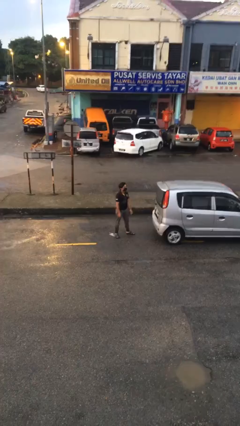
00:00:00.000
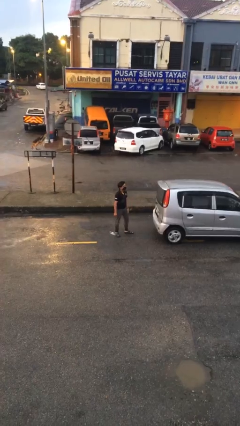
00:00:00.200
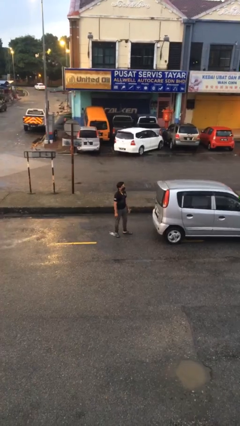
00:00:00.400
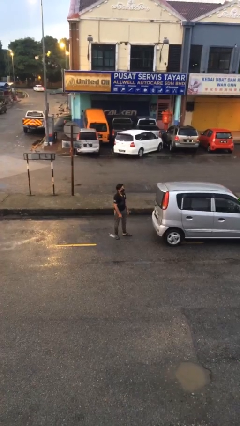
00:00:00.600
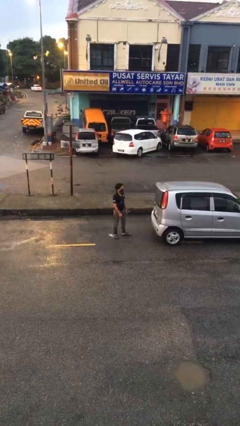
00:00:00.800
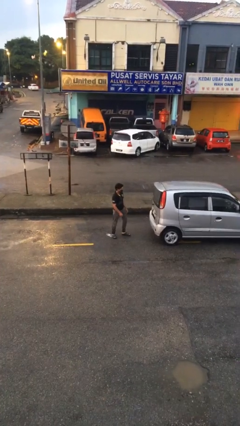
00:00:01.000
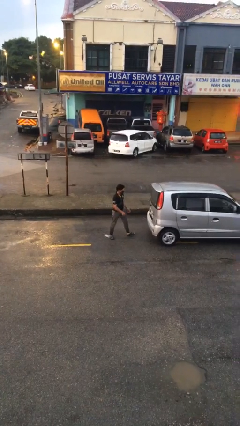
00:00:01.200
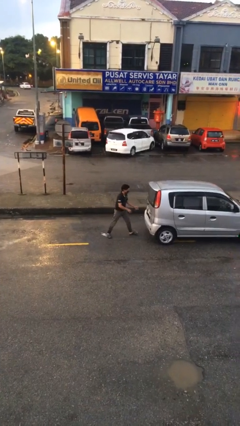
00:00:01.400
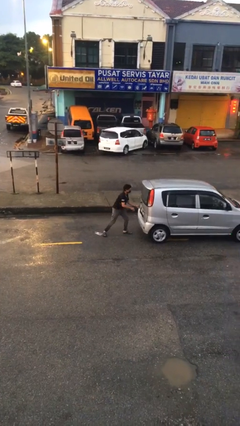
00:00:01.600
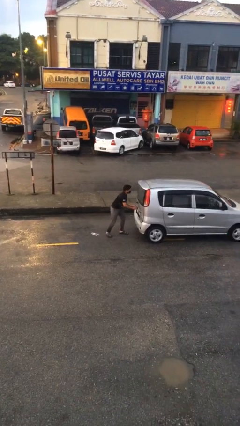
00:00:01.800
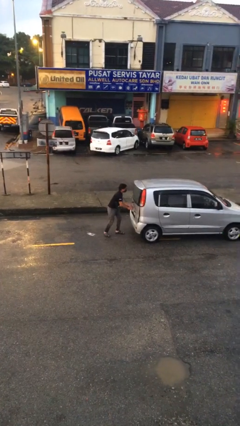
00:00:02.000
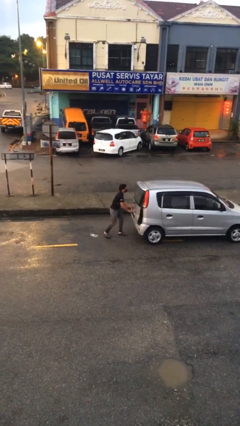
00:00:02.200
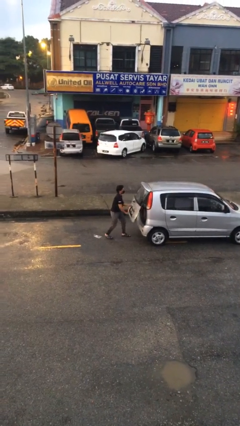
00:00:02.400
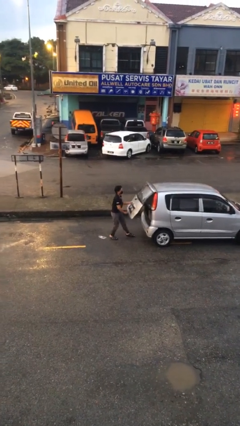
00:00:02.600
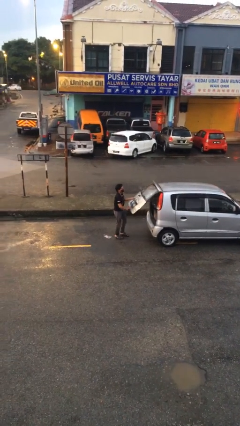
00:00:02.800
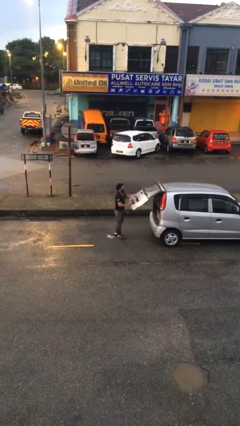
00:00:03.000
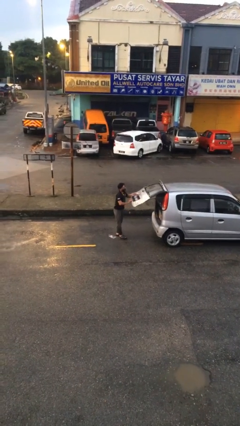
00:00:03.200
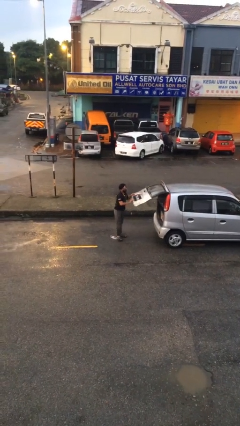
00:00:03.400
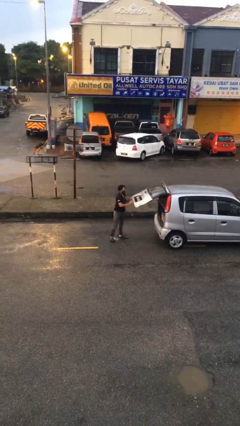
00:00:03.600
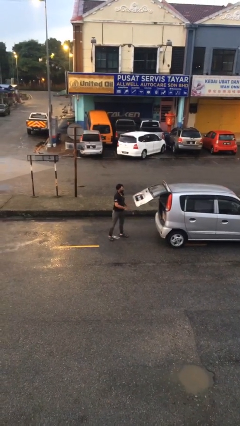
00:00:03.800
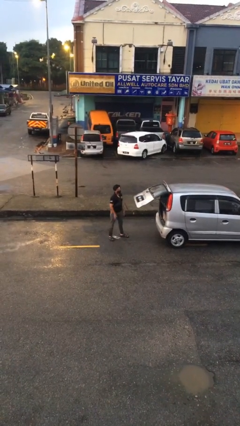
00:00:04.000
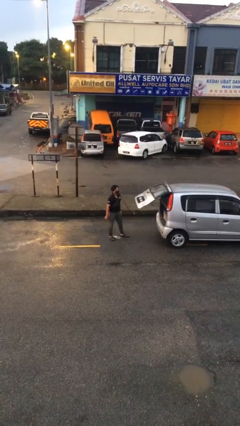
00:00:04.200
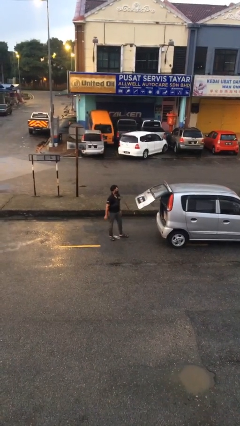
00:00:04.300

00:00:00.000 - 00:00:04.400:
person opens car trunk

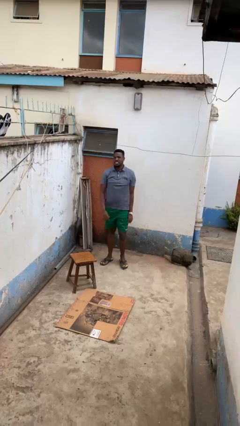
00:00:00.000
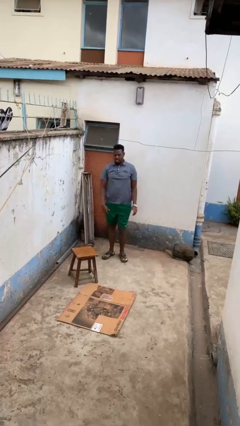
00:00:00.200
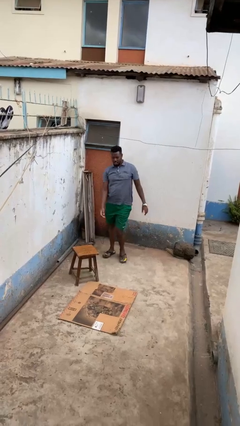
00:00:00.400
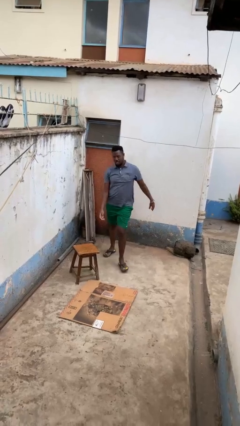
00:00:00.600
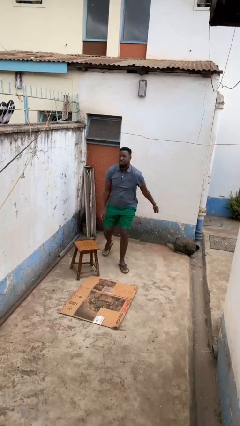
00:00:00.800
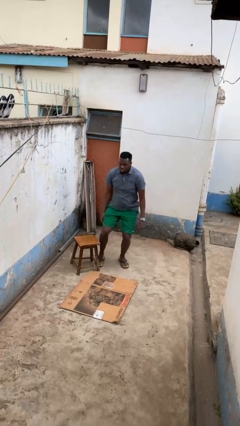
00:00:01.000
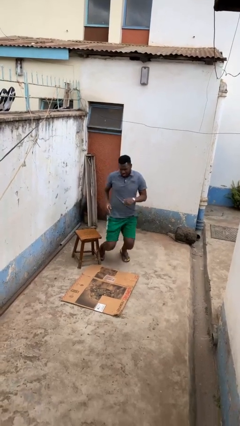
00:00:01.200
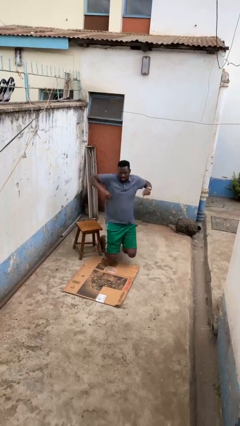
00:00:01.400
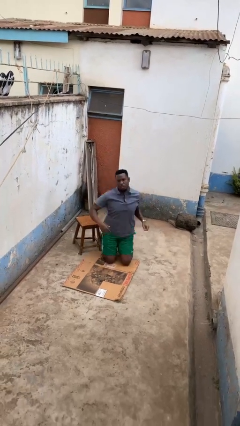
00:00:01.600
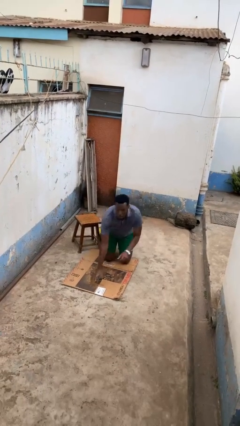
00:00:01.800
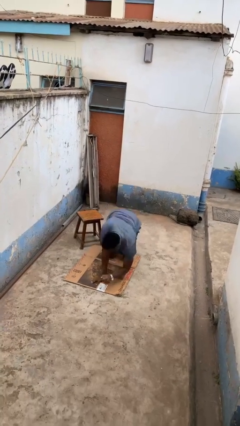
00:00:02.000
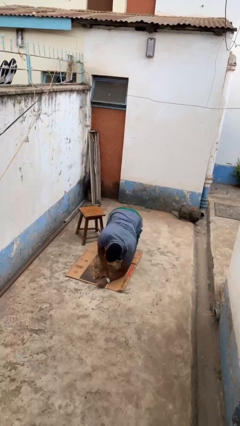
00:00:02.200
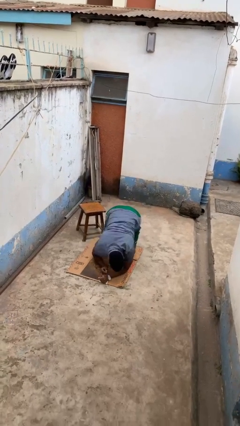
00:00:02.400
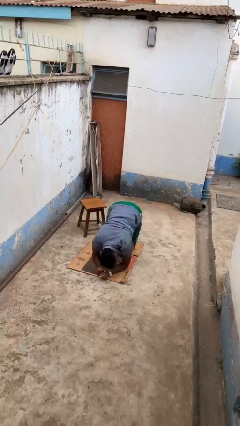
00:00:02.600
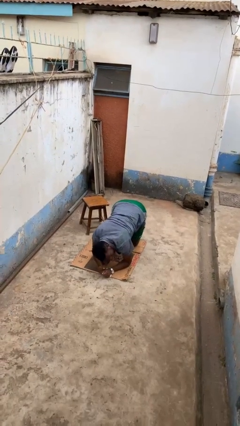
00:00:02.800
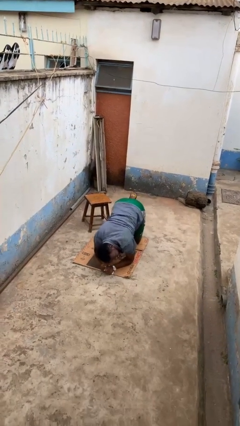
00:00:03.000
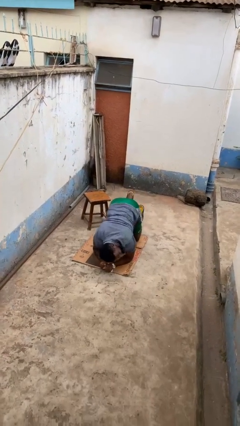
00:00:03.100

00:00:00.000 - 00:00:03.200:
person trips on object on floor

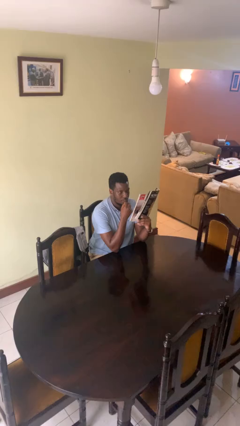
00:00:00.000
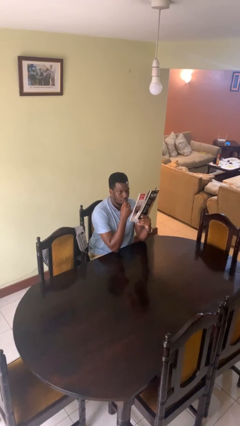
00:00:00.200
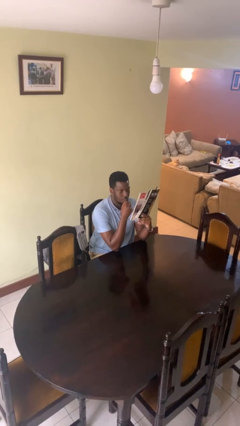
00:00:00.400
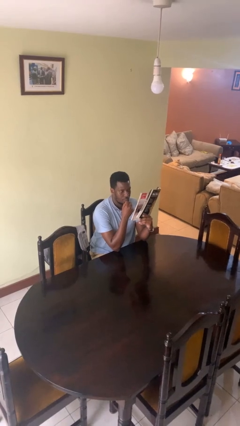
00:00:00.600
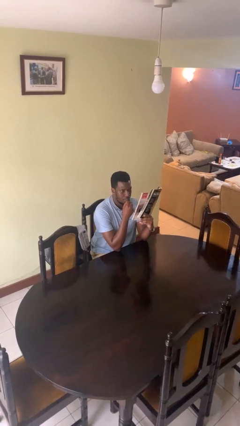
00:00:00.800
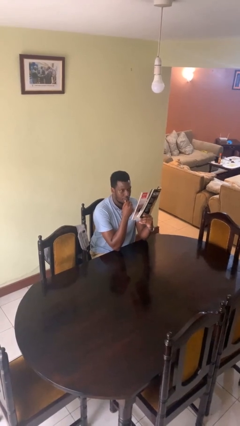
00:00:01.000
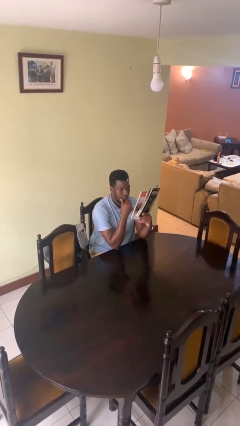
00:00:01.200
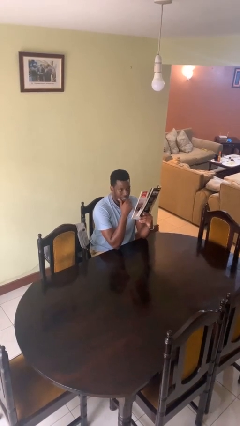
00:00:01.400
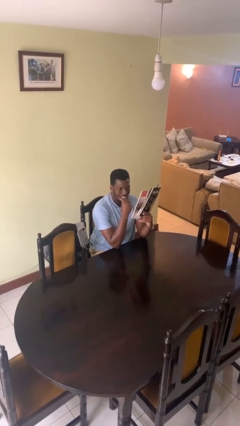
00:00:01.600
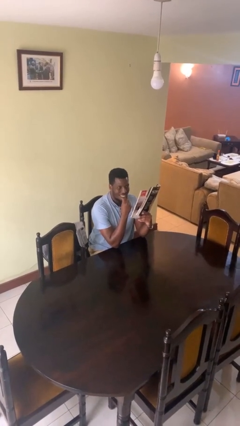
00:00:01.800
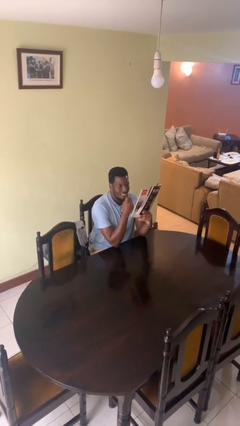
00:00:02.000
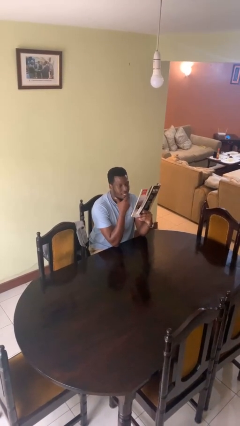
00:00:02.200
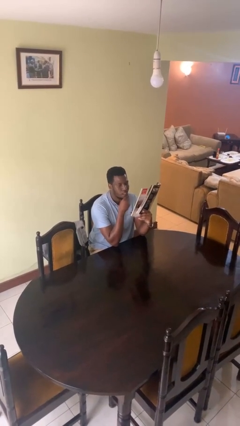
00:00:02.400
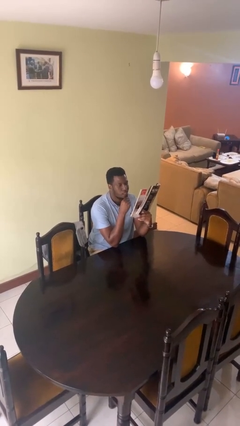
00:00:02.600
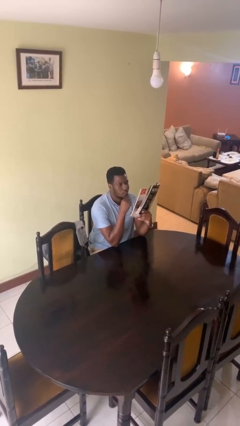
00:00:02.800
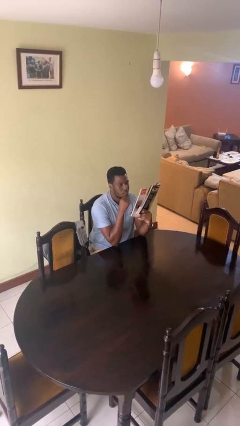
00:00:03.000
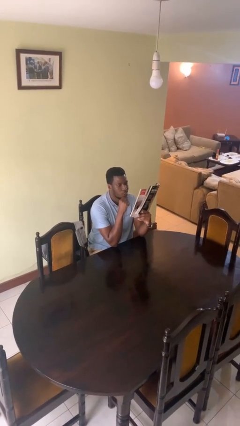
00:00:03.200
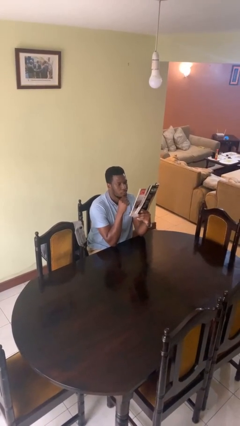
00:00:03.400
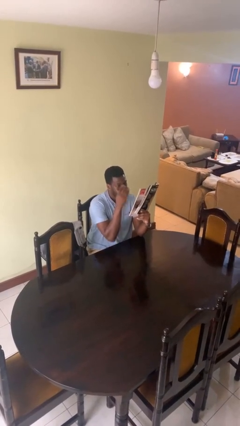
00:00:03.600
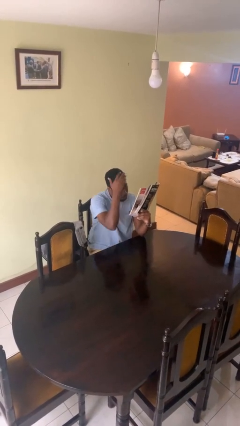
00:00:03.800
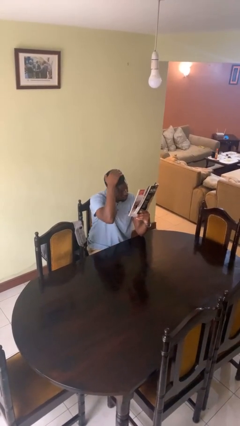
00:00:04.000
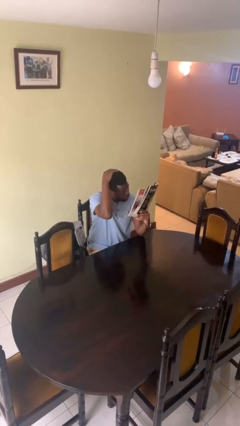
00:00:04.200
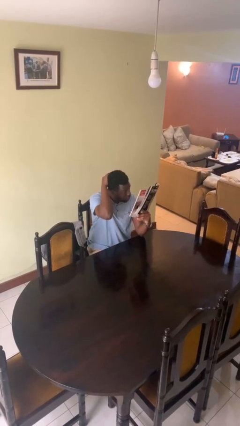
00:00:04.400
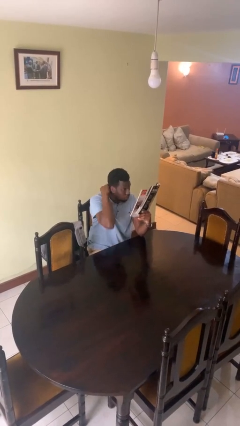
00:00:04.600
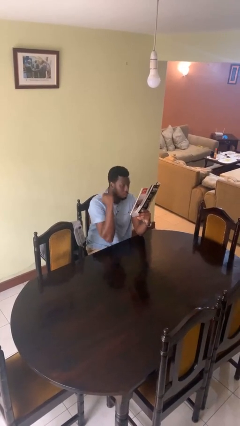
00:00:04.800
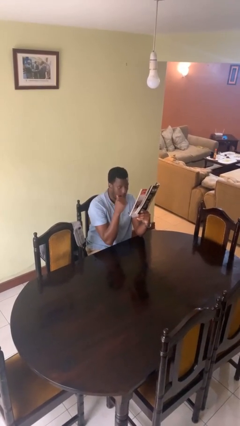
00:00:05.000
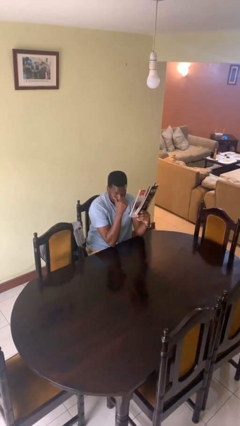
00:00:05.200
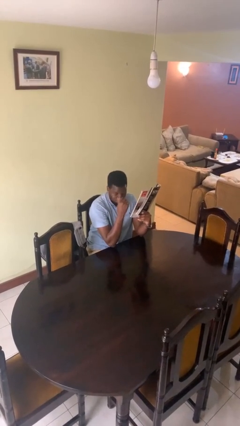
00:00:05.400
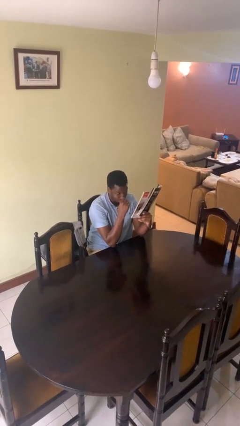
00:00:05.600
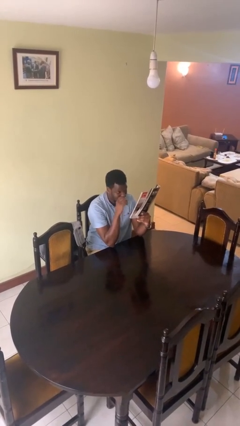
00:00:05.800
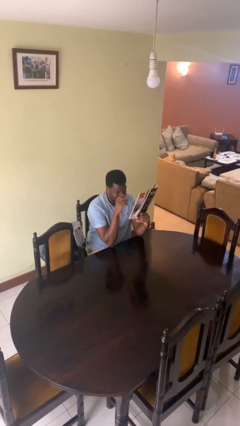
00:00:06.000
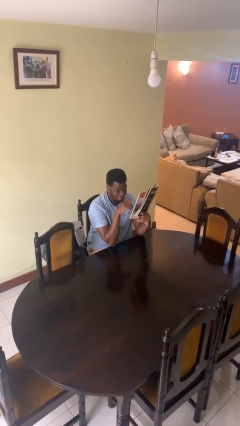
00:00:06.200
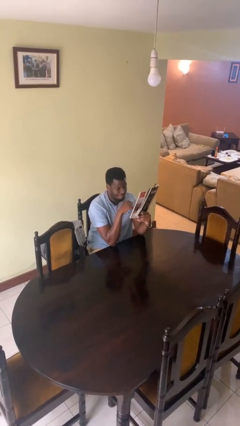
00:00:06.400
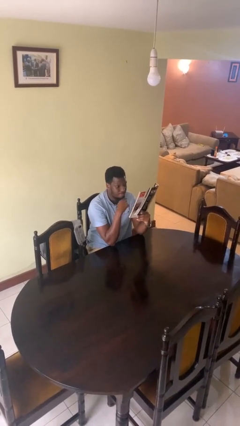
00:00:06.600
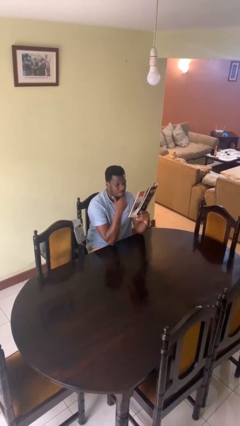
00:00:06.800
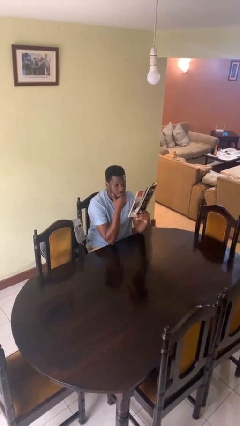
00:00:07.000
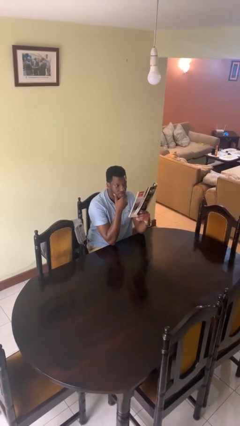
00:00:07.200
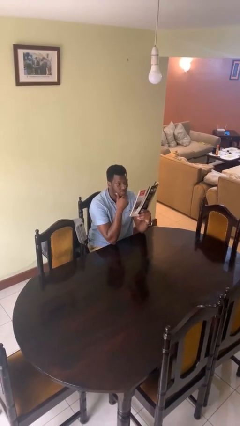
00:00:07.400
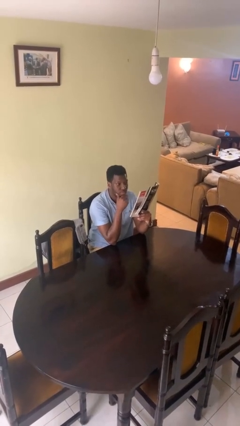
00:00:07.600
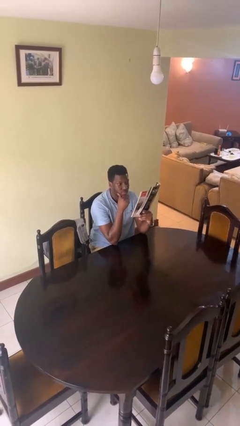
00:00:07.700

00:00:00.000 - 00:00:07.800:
person reads document

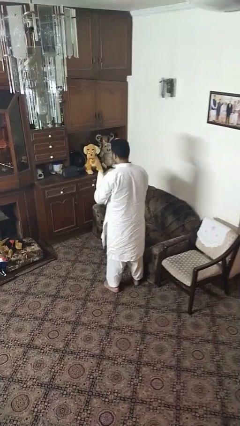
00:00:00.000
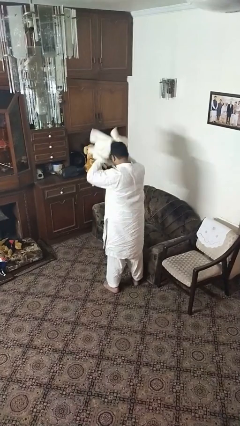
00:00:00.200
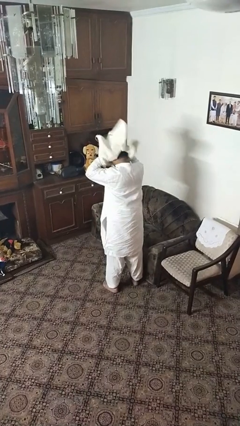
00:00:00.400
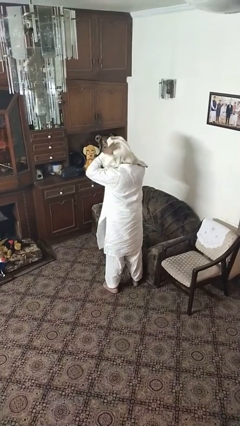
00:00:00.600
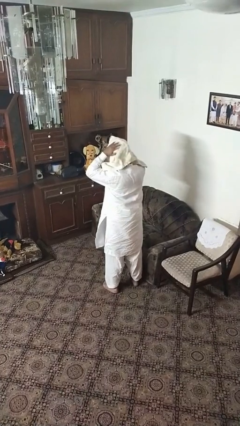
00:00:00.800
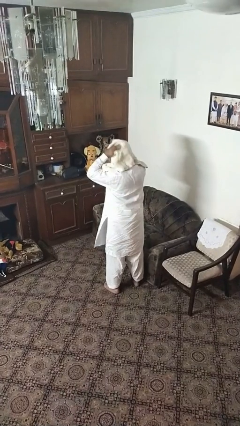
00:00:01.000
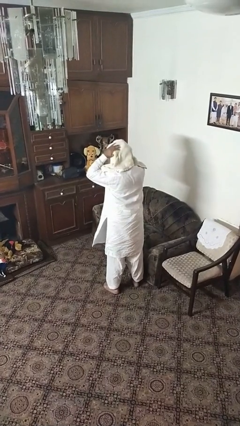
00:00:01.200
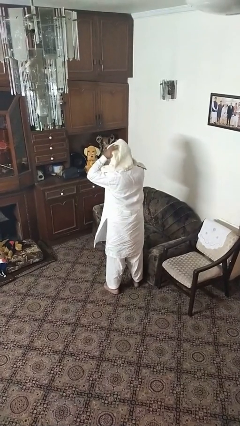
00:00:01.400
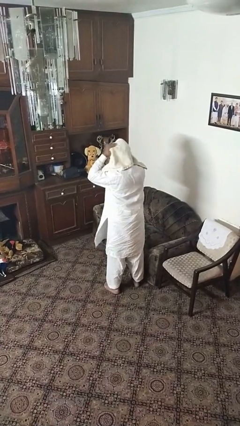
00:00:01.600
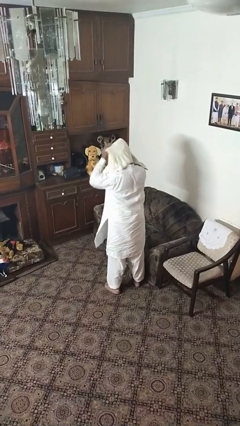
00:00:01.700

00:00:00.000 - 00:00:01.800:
person dries hair with towel

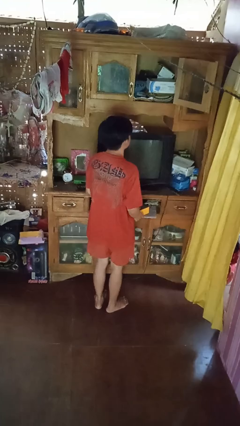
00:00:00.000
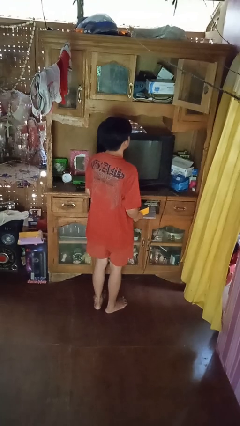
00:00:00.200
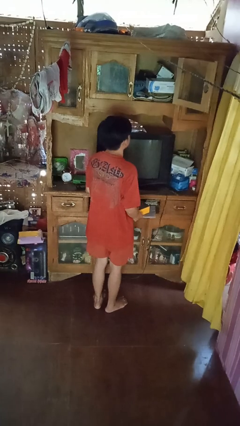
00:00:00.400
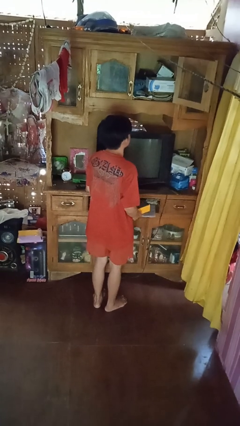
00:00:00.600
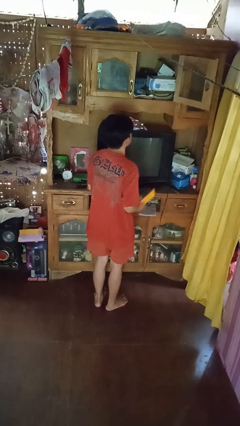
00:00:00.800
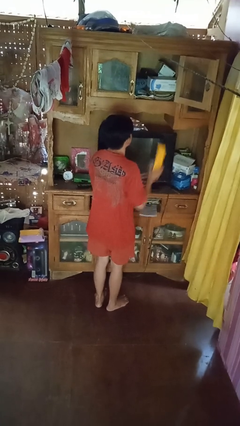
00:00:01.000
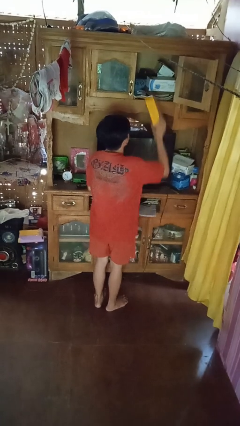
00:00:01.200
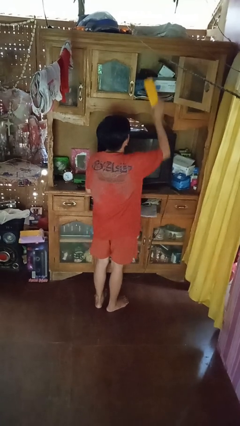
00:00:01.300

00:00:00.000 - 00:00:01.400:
person puts down object on shelf
